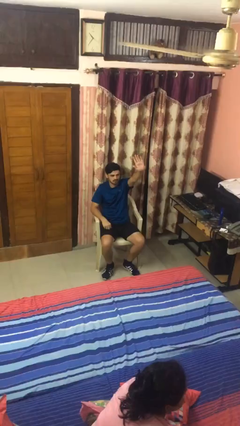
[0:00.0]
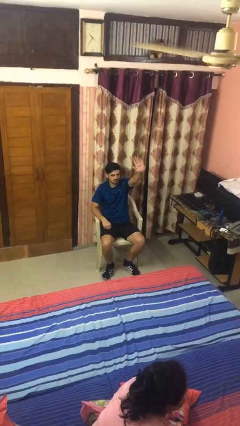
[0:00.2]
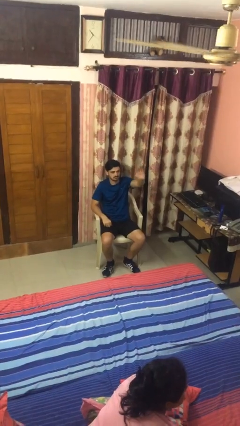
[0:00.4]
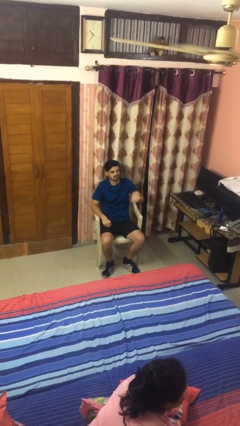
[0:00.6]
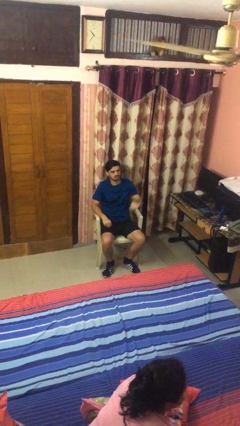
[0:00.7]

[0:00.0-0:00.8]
person gestures lower hand

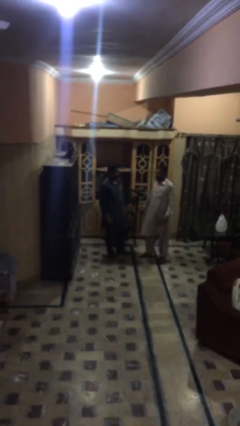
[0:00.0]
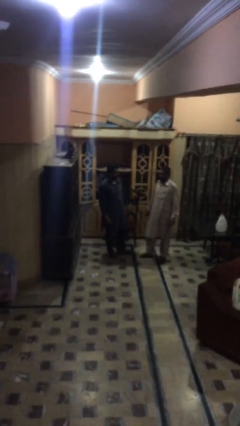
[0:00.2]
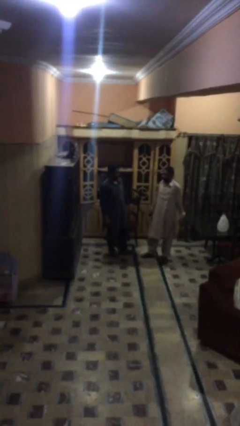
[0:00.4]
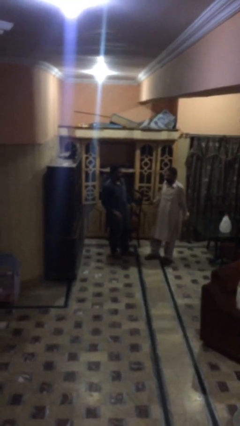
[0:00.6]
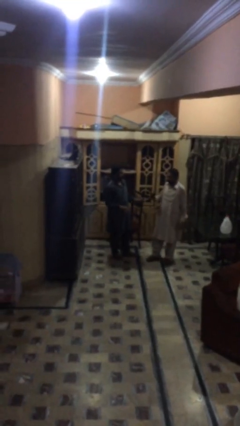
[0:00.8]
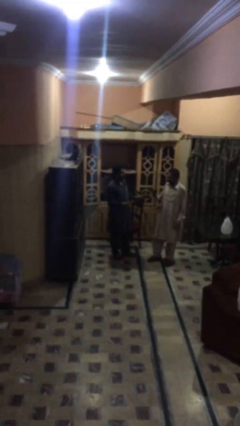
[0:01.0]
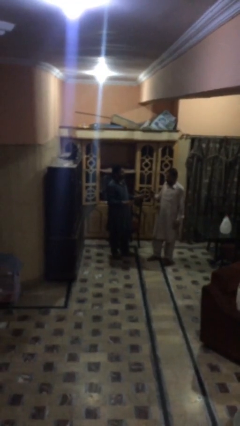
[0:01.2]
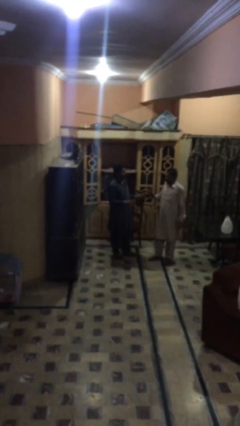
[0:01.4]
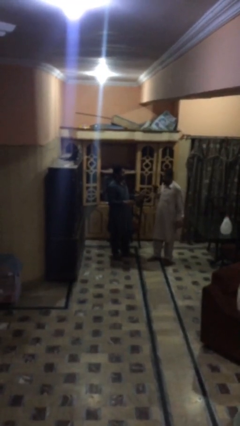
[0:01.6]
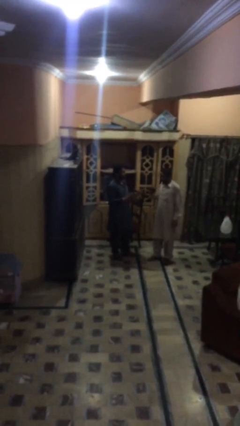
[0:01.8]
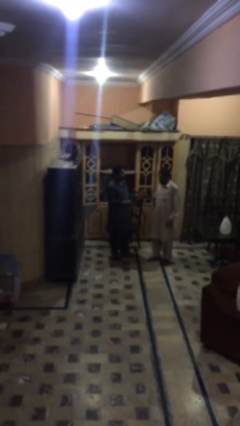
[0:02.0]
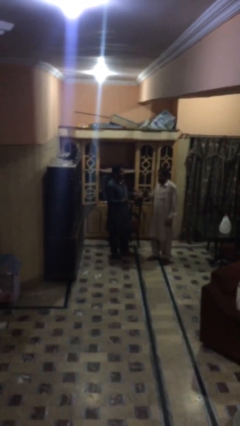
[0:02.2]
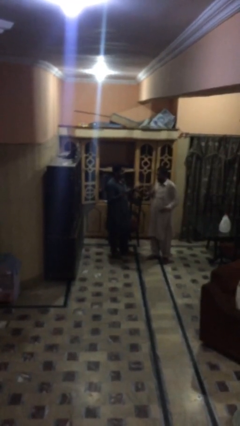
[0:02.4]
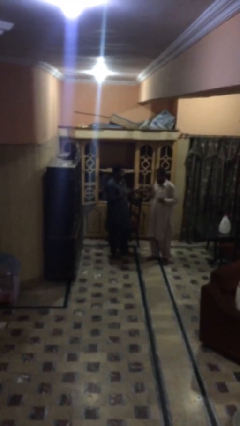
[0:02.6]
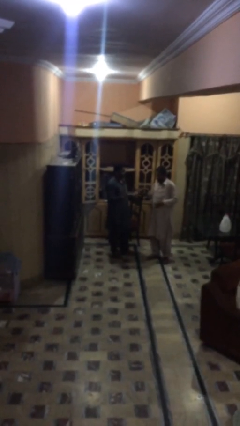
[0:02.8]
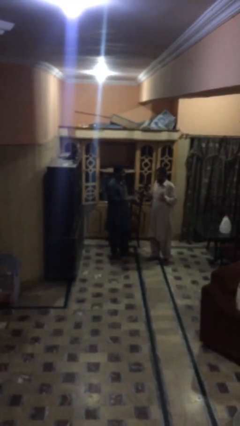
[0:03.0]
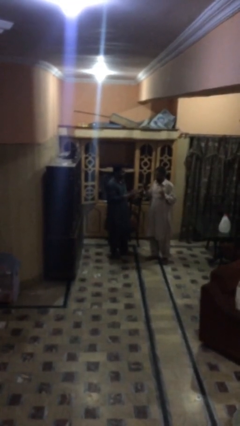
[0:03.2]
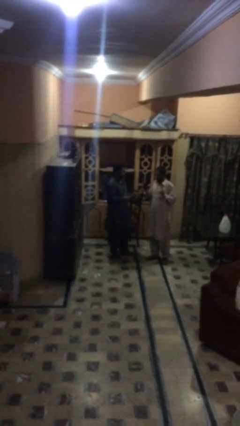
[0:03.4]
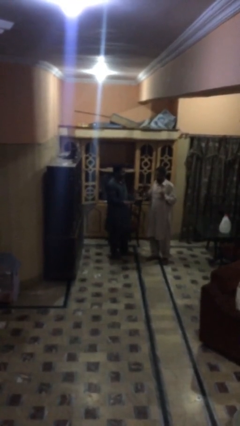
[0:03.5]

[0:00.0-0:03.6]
person talks to person

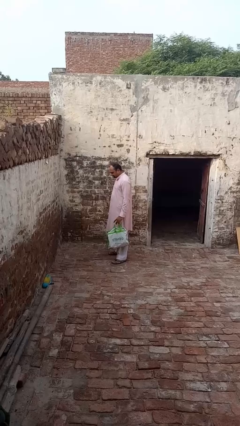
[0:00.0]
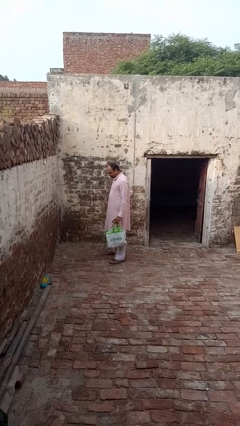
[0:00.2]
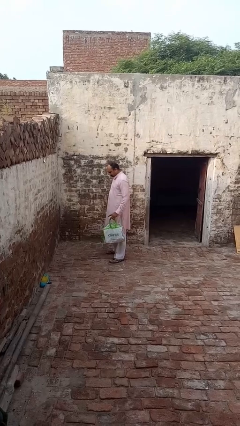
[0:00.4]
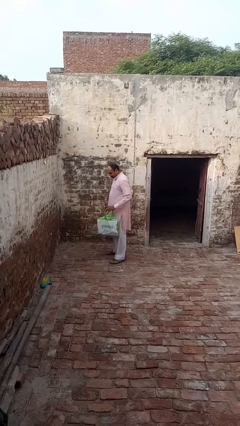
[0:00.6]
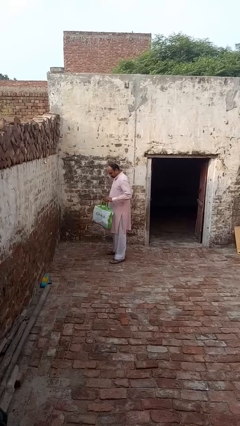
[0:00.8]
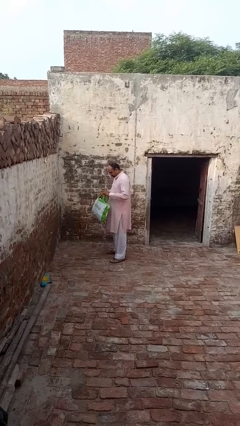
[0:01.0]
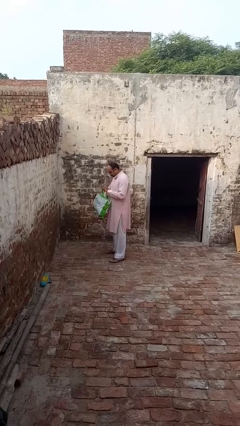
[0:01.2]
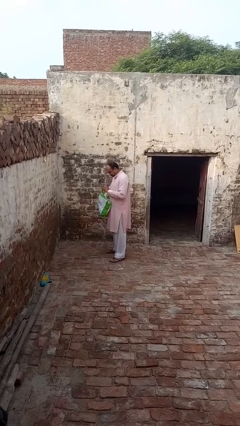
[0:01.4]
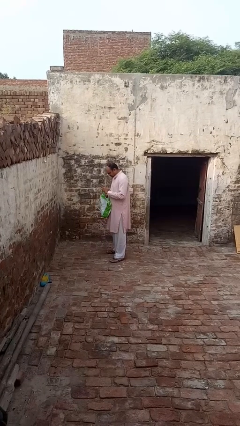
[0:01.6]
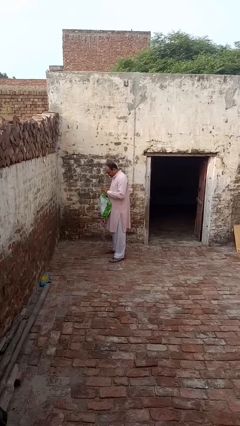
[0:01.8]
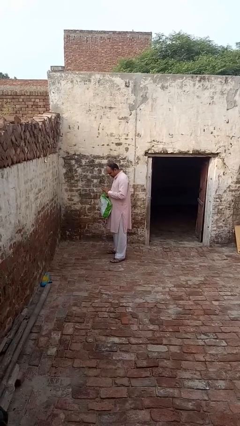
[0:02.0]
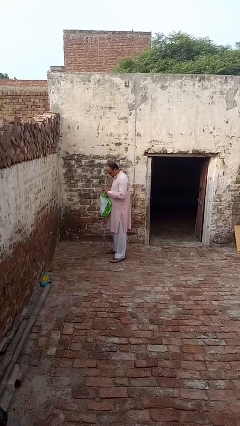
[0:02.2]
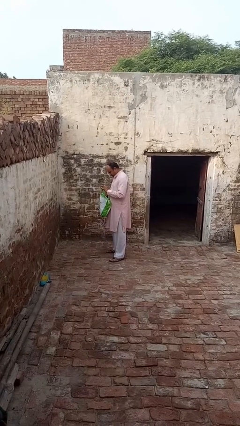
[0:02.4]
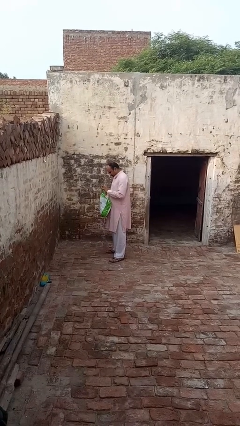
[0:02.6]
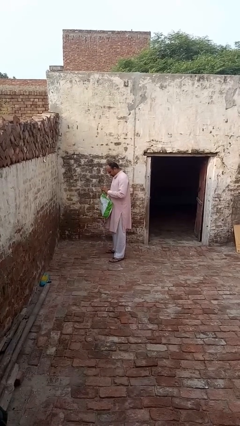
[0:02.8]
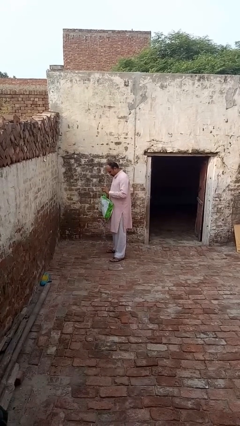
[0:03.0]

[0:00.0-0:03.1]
person searches in bag

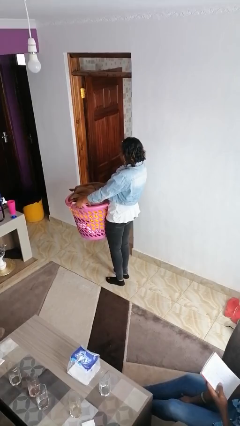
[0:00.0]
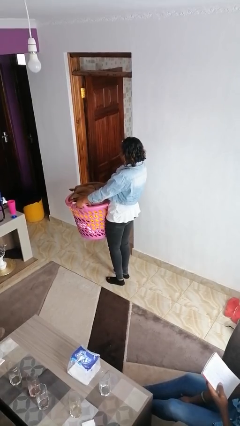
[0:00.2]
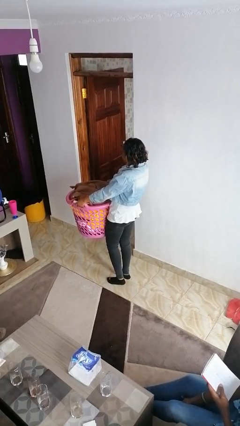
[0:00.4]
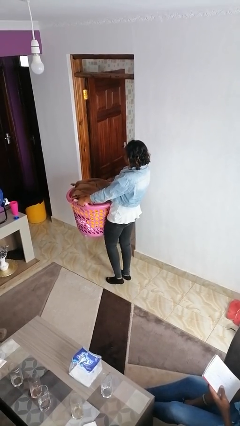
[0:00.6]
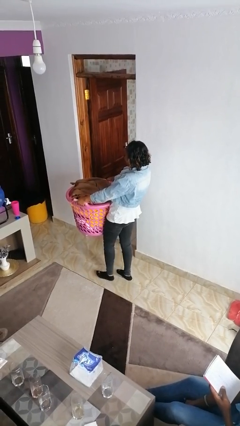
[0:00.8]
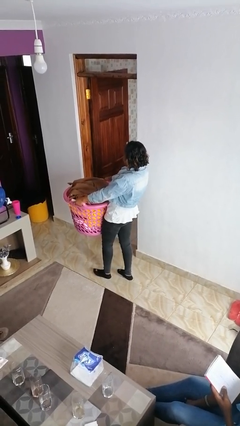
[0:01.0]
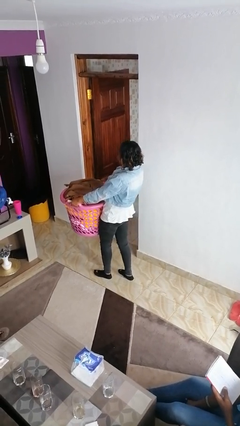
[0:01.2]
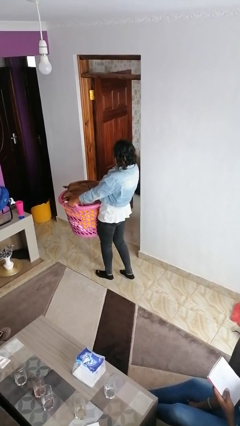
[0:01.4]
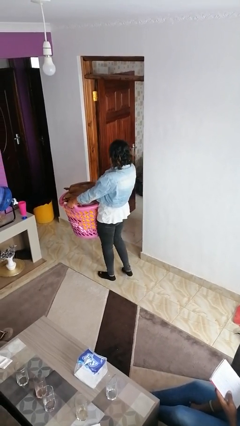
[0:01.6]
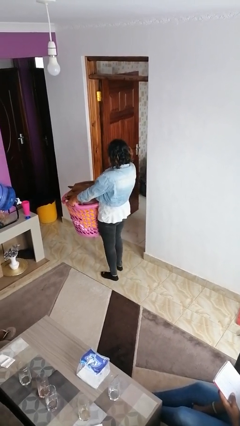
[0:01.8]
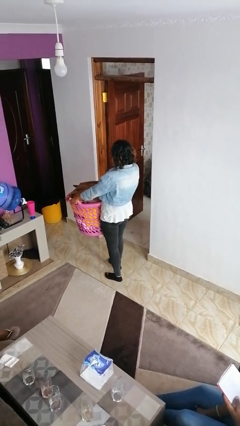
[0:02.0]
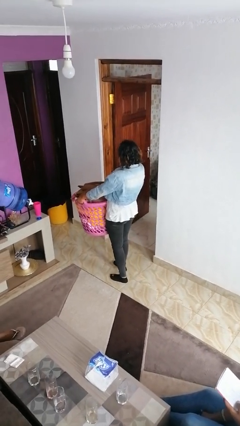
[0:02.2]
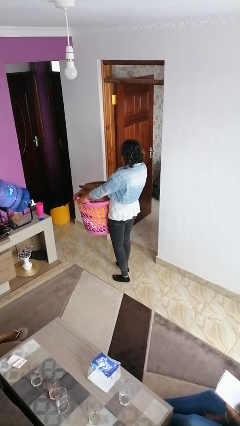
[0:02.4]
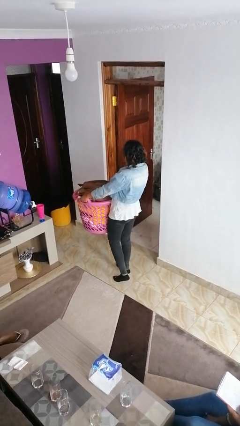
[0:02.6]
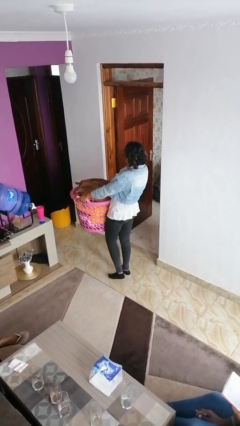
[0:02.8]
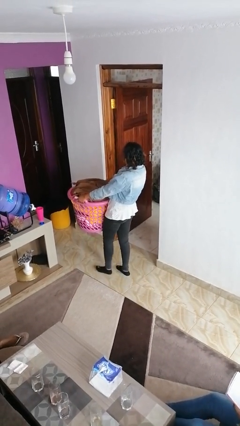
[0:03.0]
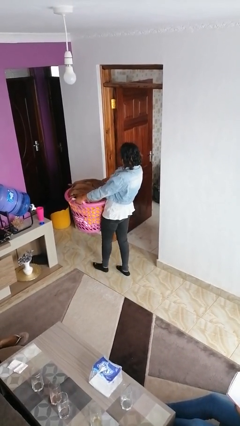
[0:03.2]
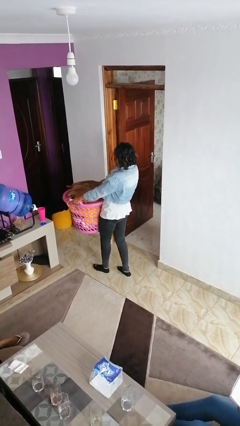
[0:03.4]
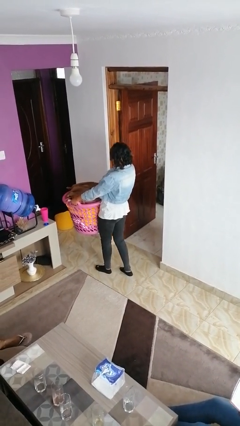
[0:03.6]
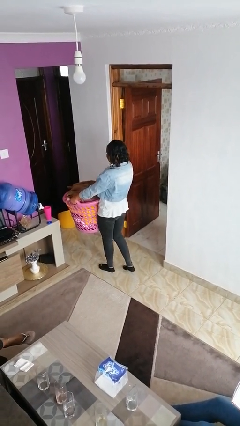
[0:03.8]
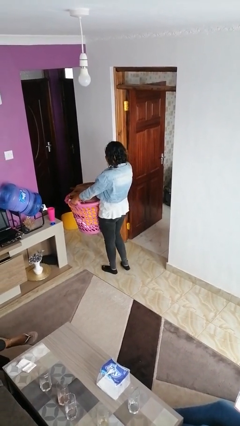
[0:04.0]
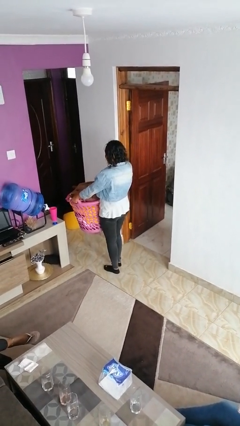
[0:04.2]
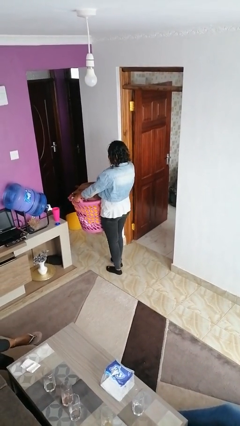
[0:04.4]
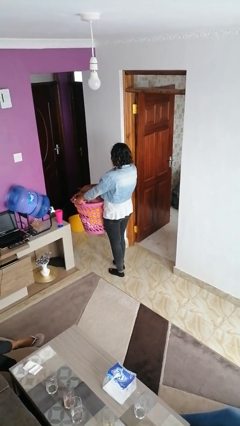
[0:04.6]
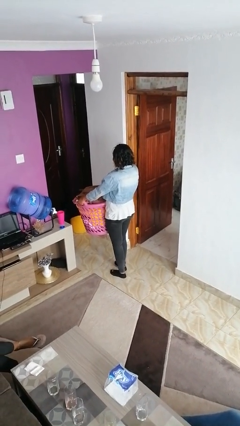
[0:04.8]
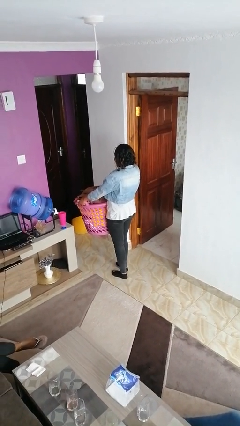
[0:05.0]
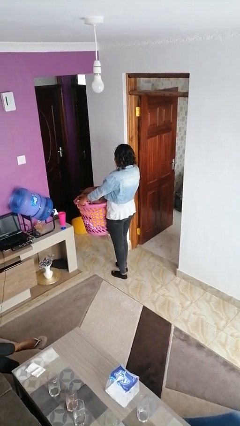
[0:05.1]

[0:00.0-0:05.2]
person carries laundry basket

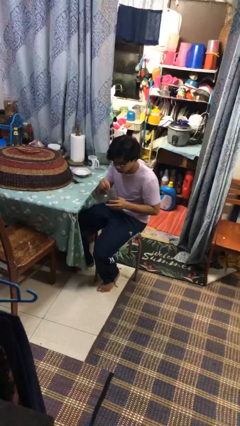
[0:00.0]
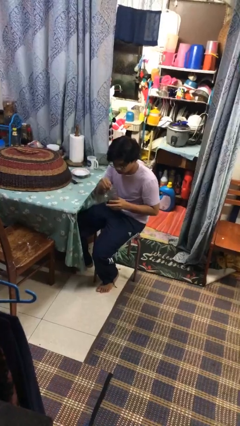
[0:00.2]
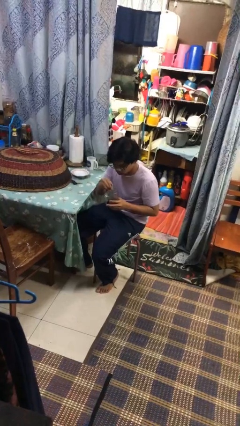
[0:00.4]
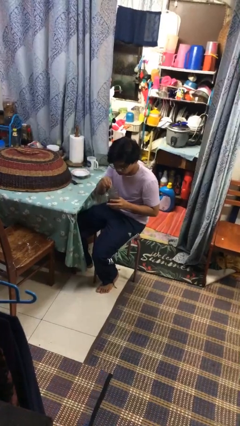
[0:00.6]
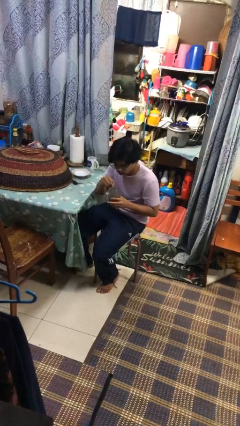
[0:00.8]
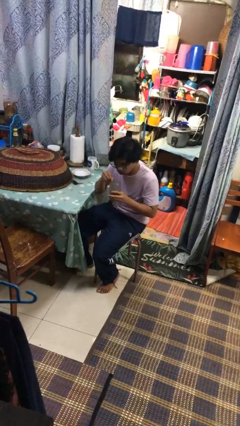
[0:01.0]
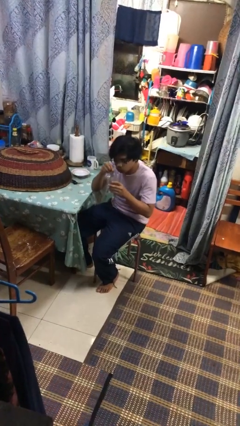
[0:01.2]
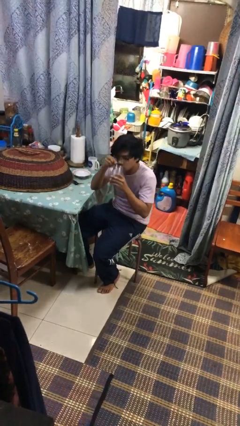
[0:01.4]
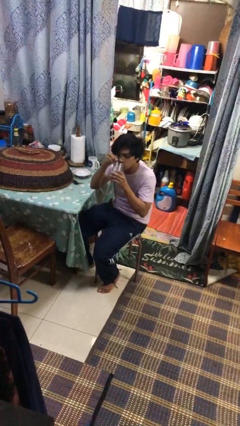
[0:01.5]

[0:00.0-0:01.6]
person stirs mug

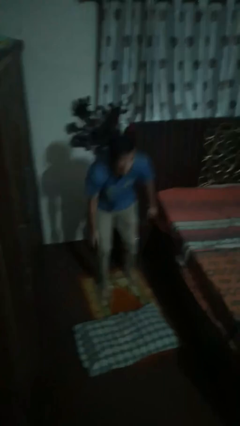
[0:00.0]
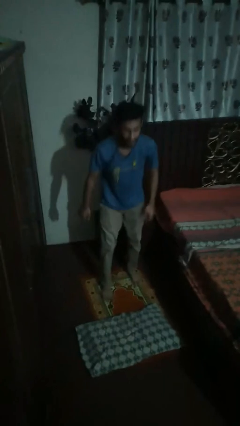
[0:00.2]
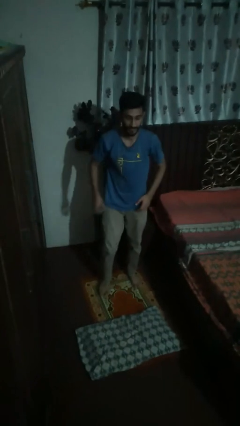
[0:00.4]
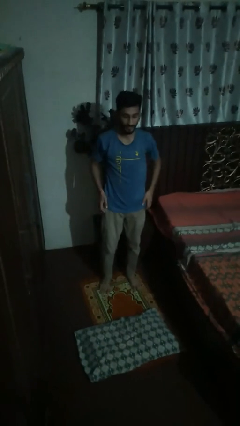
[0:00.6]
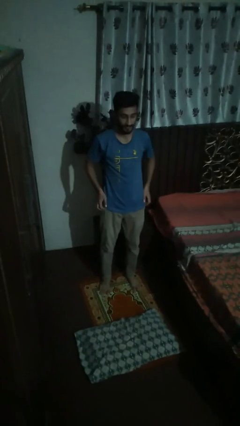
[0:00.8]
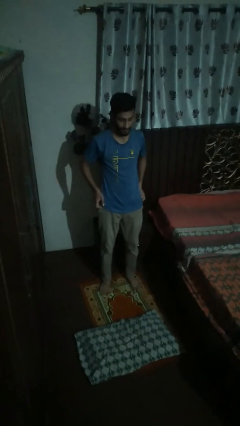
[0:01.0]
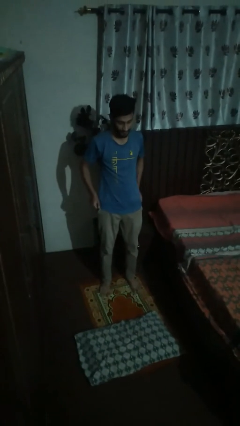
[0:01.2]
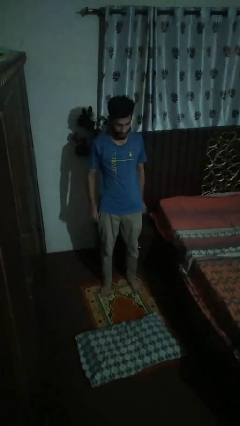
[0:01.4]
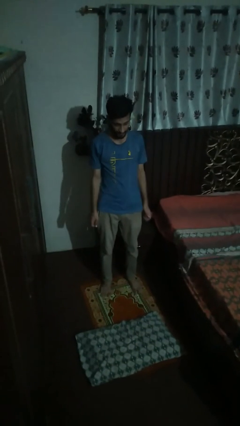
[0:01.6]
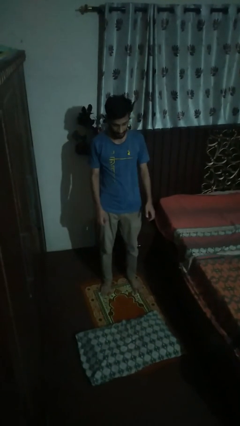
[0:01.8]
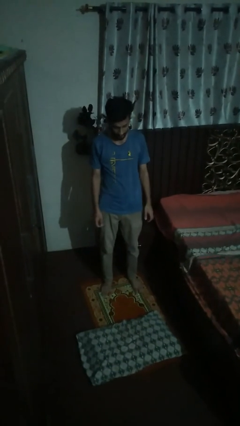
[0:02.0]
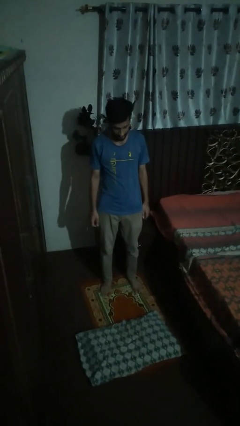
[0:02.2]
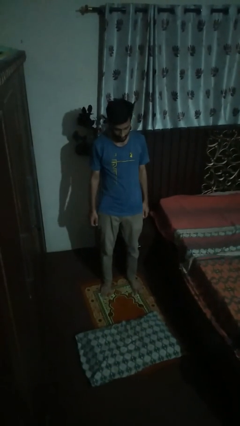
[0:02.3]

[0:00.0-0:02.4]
person stands up from floor

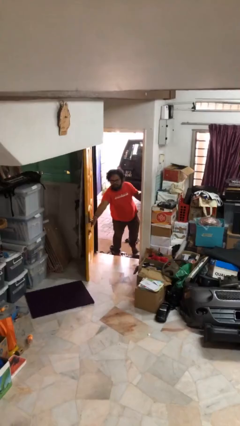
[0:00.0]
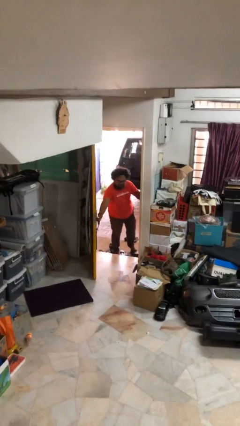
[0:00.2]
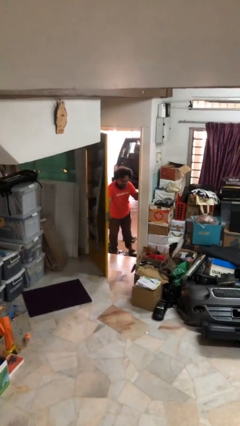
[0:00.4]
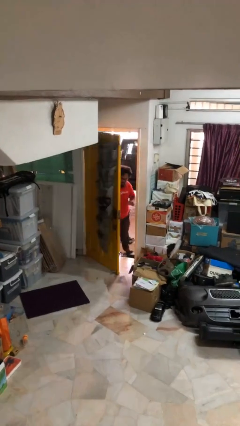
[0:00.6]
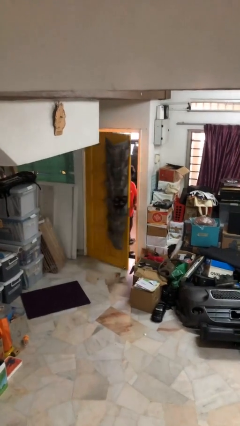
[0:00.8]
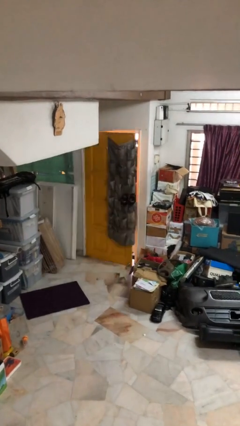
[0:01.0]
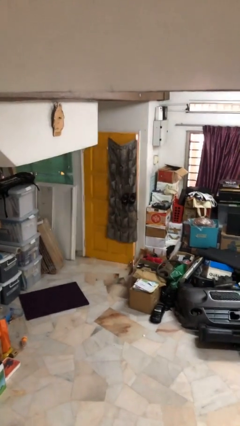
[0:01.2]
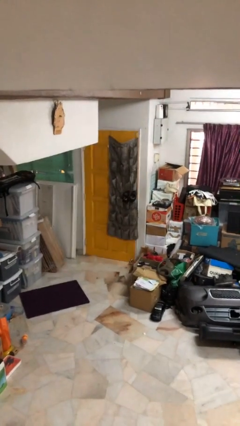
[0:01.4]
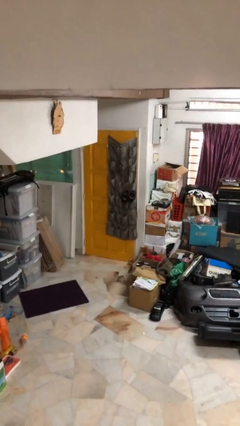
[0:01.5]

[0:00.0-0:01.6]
person closes facility door
